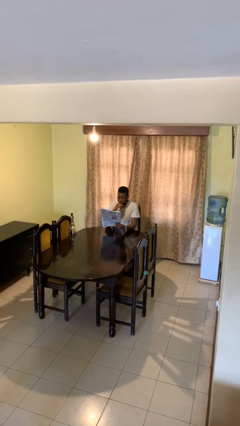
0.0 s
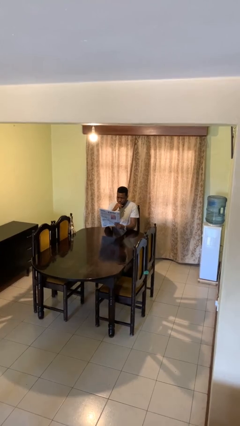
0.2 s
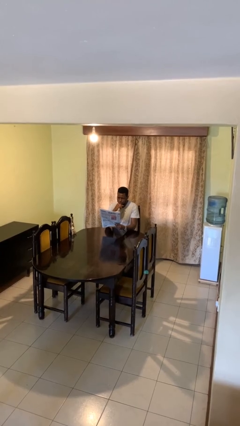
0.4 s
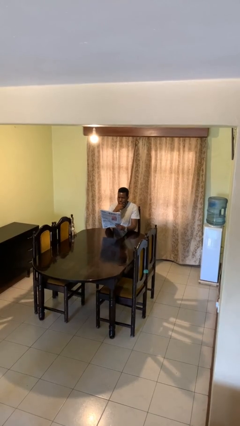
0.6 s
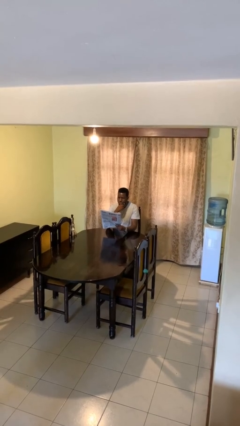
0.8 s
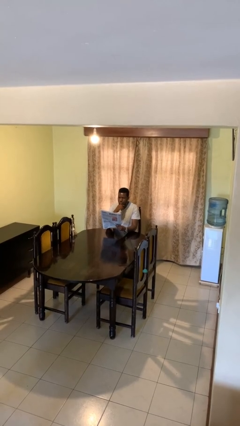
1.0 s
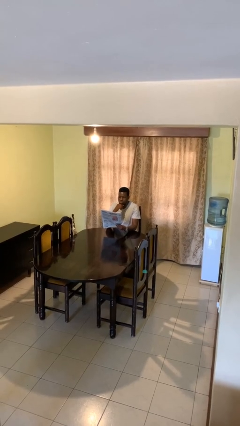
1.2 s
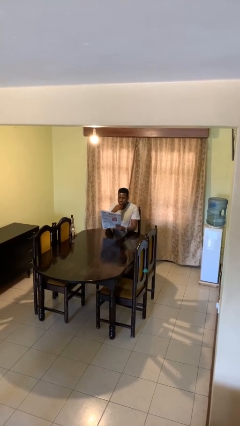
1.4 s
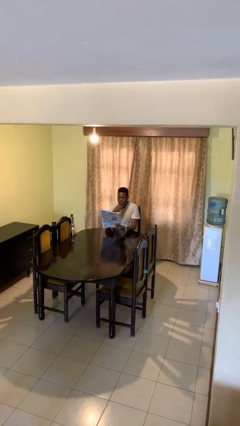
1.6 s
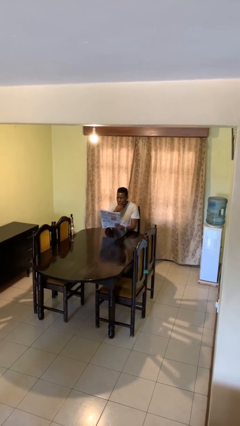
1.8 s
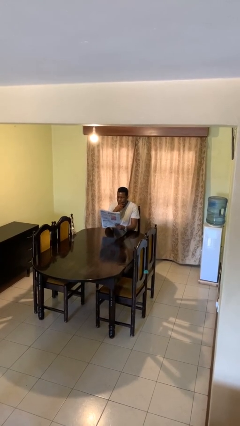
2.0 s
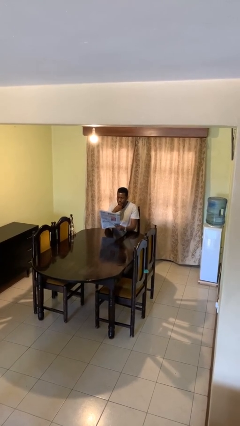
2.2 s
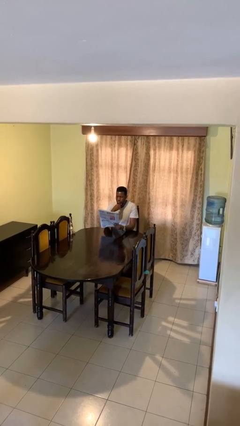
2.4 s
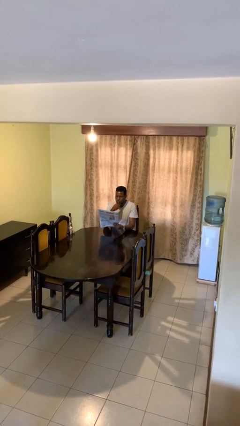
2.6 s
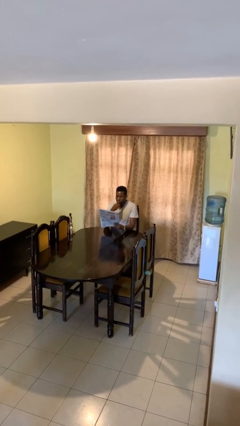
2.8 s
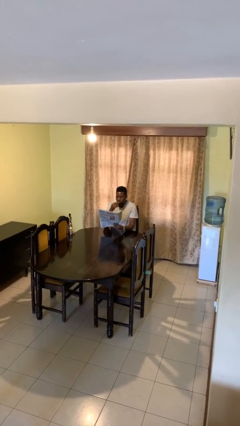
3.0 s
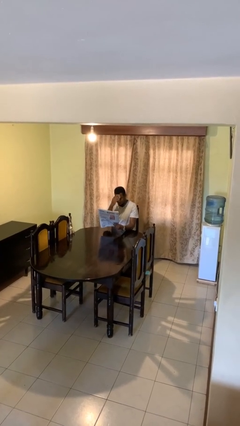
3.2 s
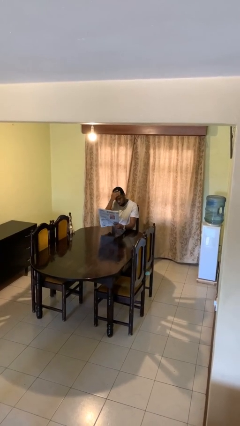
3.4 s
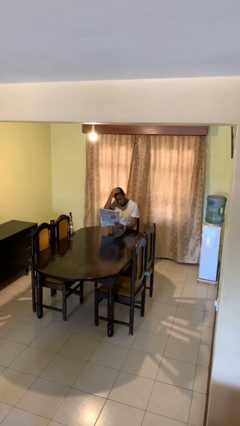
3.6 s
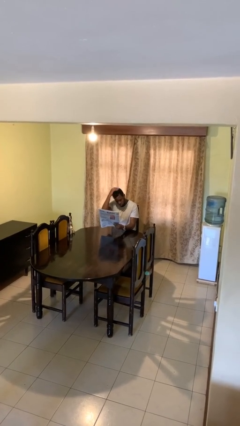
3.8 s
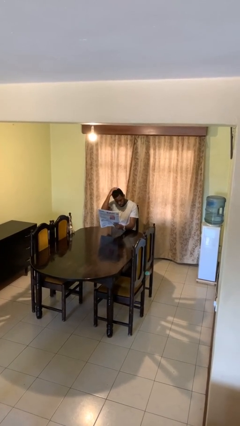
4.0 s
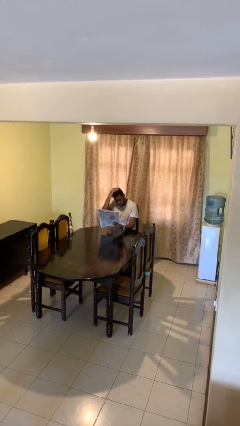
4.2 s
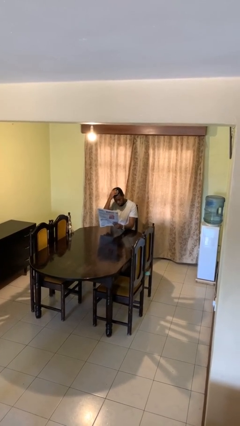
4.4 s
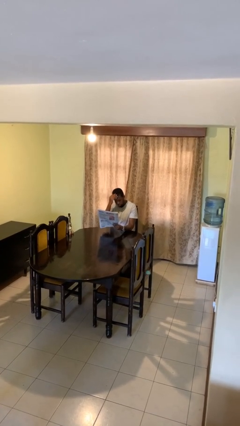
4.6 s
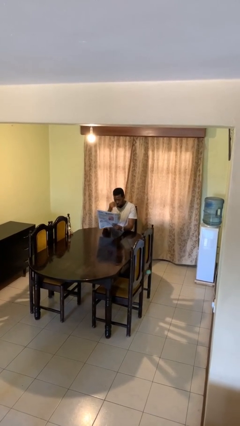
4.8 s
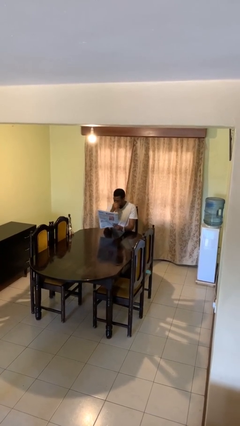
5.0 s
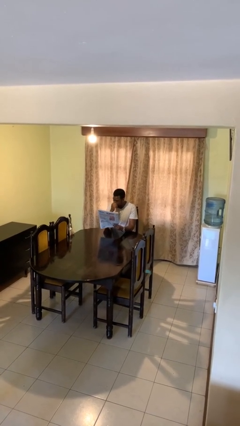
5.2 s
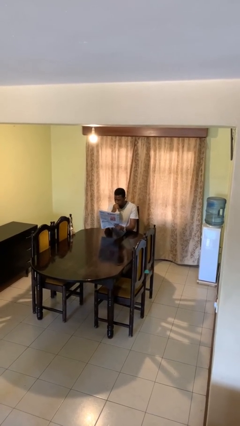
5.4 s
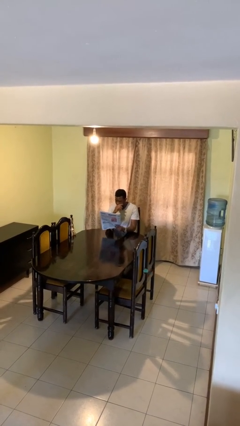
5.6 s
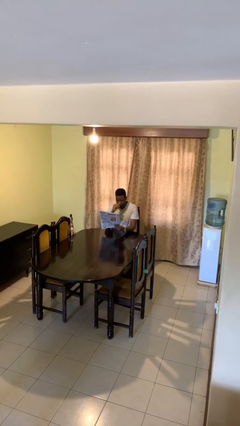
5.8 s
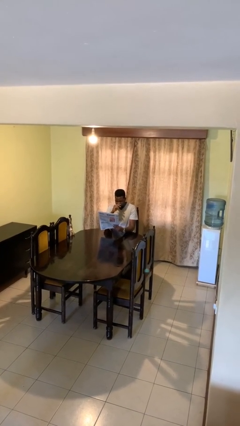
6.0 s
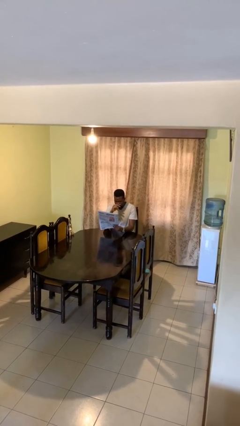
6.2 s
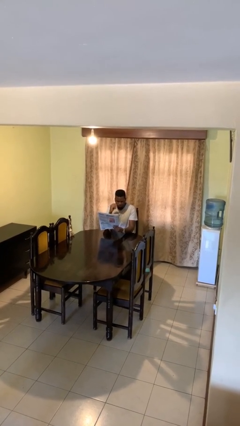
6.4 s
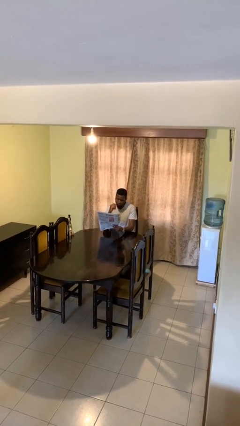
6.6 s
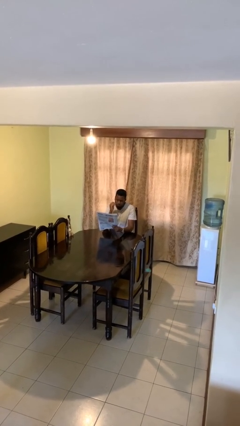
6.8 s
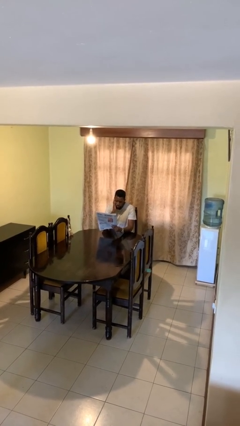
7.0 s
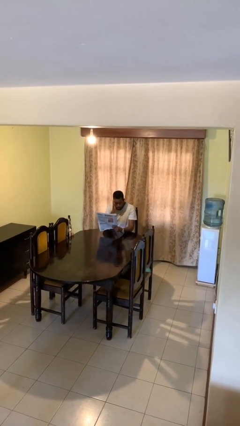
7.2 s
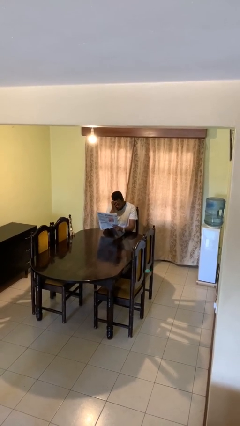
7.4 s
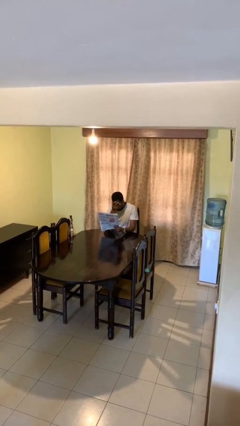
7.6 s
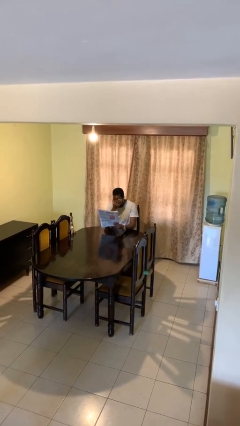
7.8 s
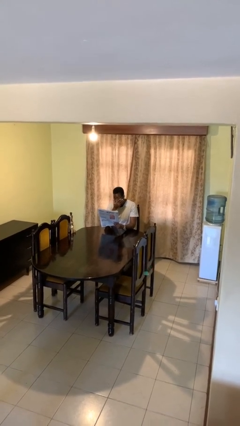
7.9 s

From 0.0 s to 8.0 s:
person reads document

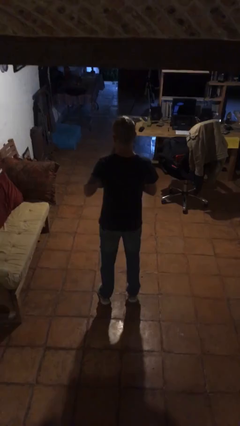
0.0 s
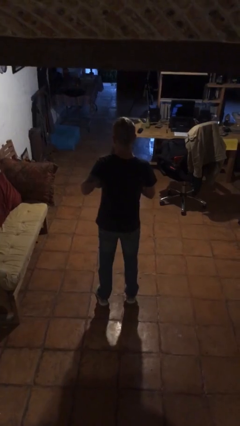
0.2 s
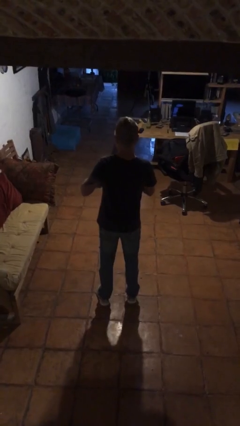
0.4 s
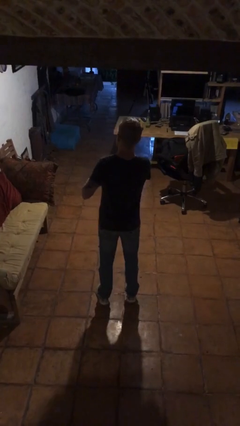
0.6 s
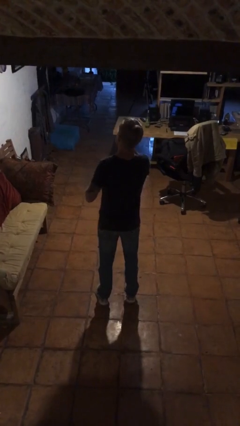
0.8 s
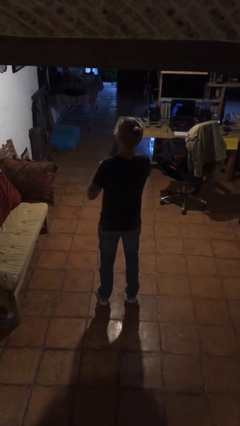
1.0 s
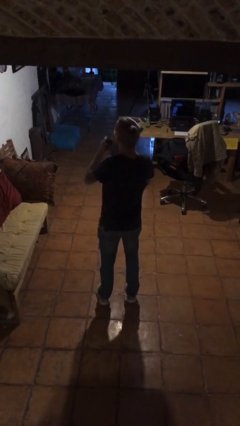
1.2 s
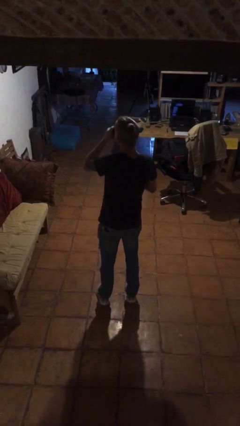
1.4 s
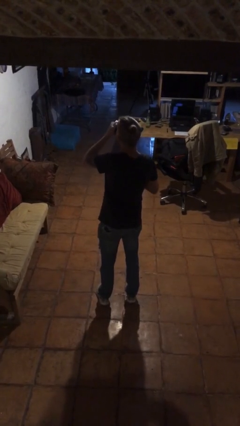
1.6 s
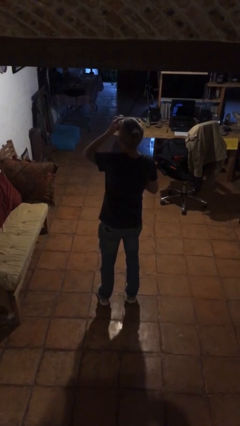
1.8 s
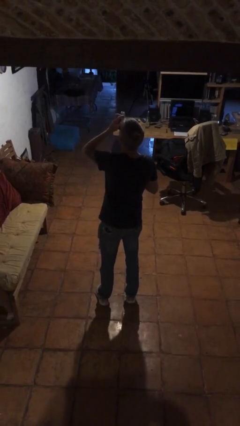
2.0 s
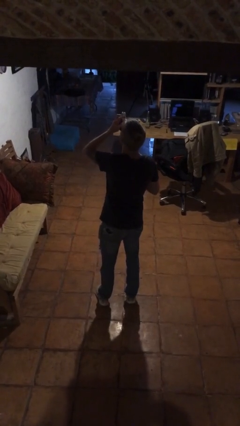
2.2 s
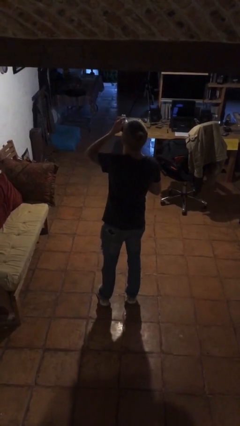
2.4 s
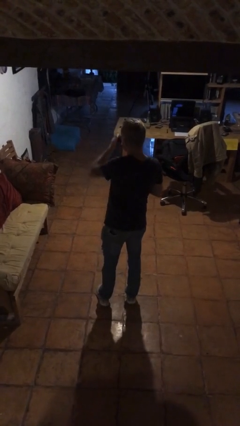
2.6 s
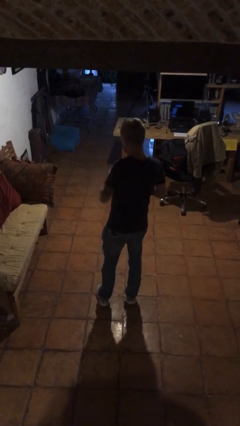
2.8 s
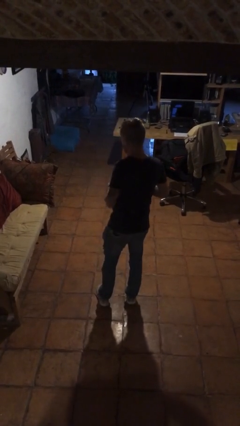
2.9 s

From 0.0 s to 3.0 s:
person drinks from cup

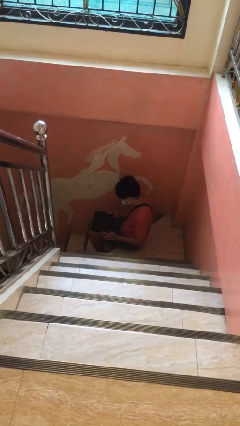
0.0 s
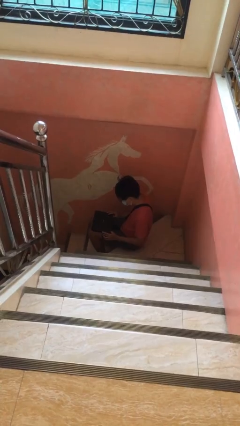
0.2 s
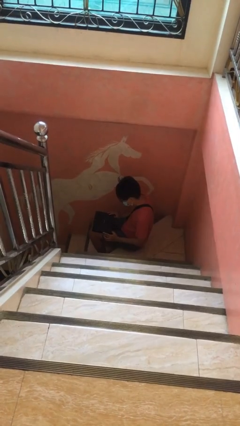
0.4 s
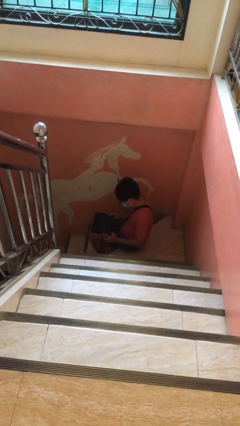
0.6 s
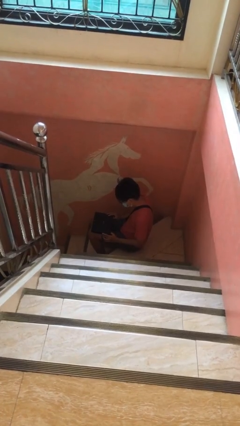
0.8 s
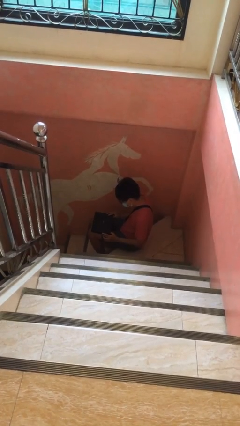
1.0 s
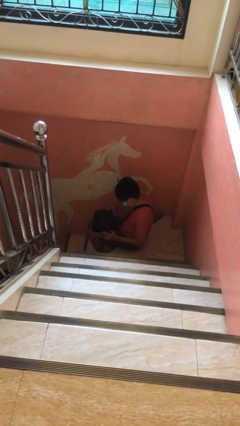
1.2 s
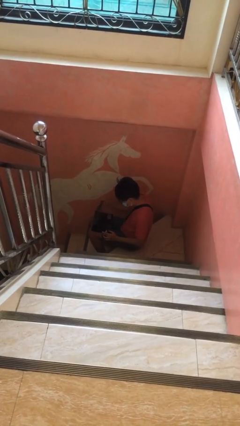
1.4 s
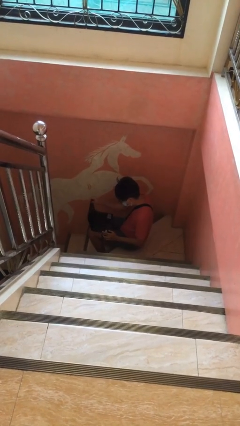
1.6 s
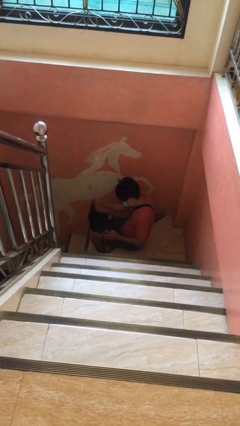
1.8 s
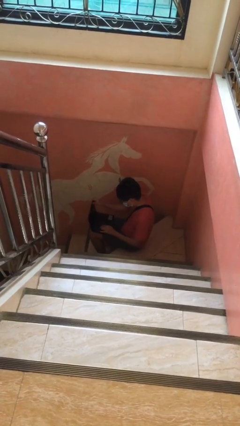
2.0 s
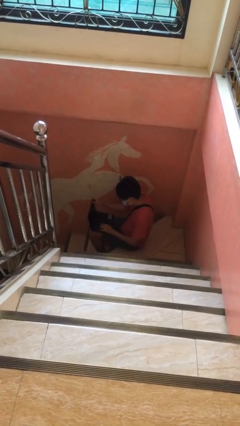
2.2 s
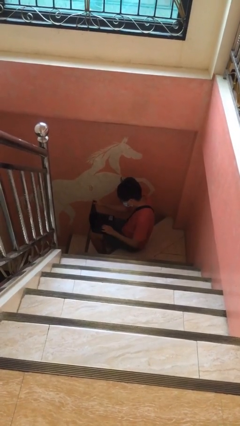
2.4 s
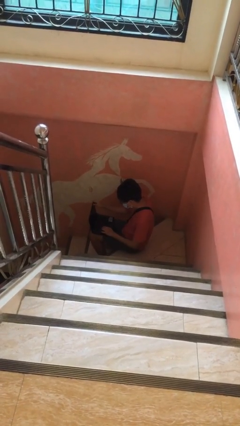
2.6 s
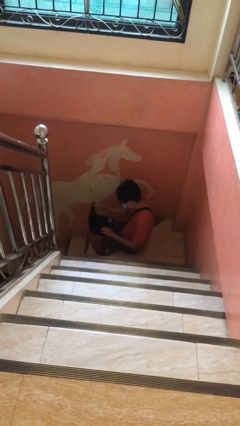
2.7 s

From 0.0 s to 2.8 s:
person interacts with laptop

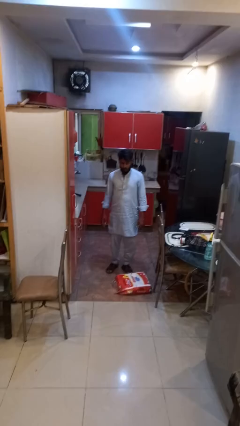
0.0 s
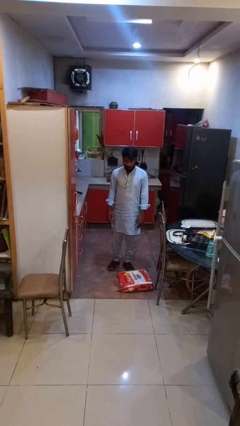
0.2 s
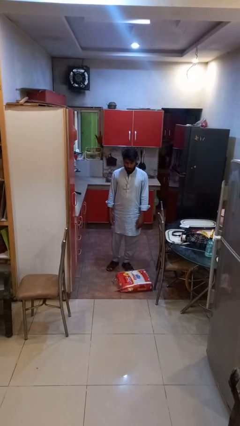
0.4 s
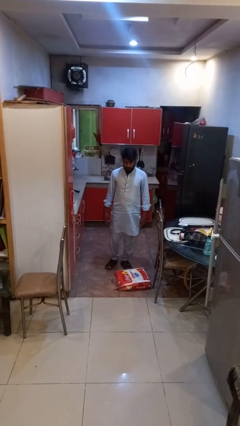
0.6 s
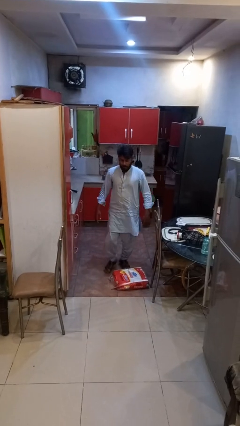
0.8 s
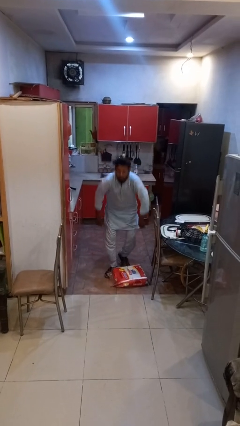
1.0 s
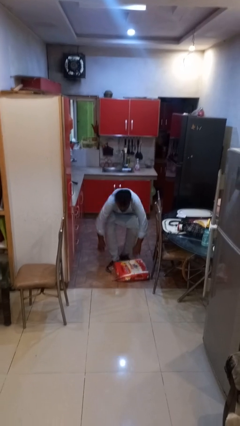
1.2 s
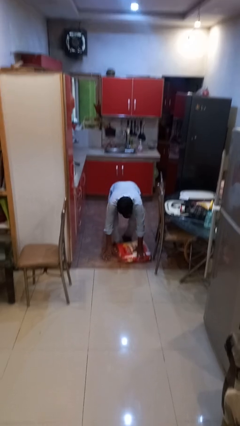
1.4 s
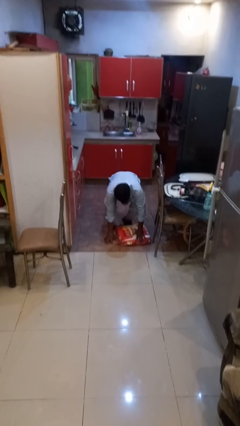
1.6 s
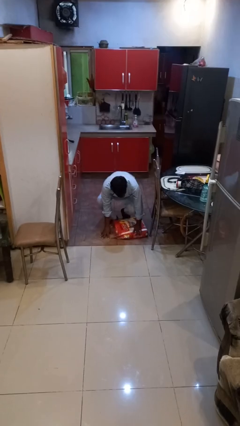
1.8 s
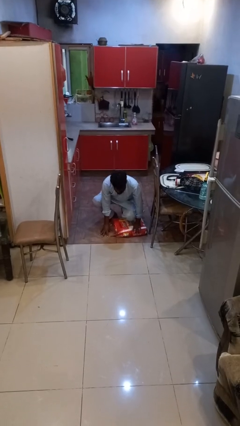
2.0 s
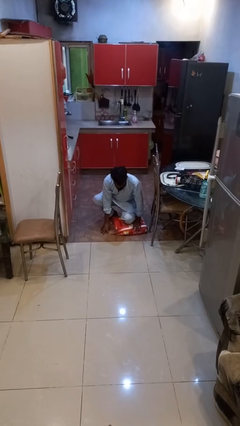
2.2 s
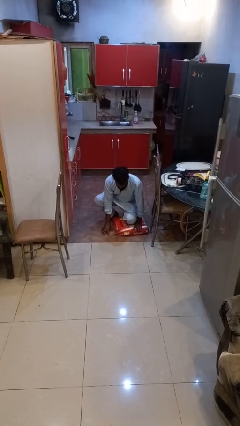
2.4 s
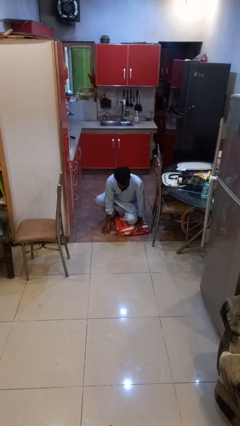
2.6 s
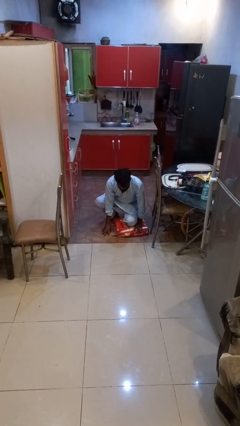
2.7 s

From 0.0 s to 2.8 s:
person trips on object on floor

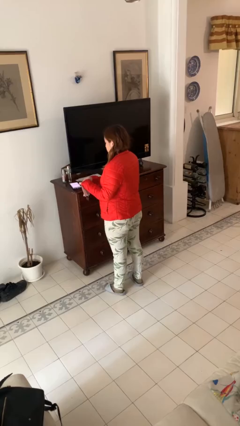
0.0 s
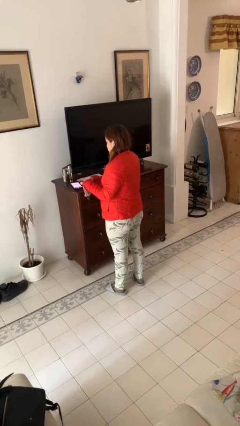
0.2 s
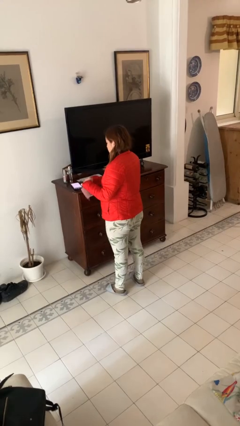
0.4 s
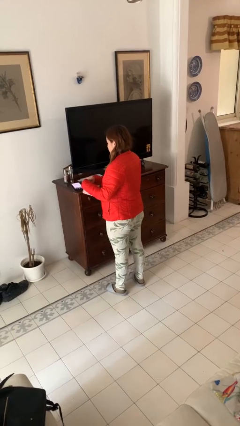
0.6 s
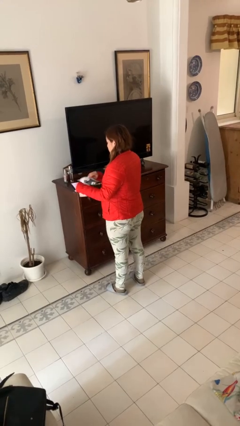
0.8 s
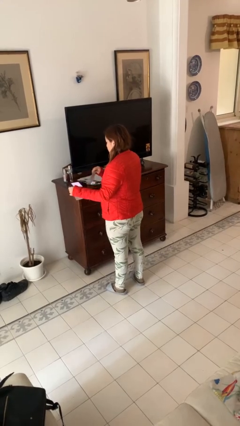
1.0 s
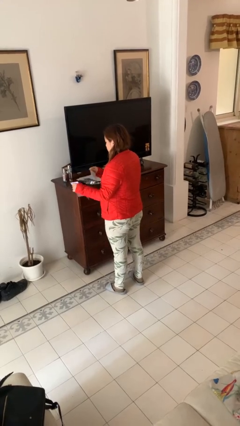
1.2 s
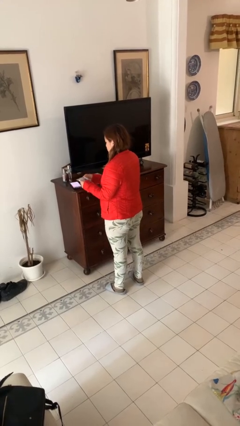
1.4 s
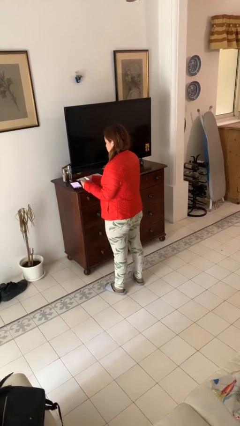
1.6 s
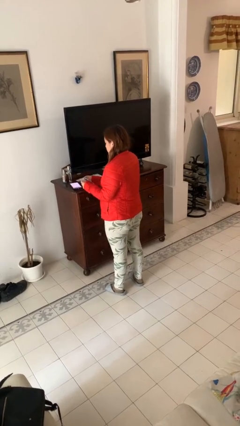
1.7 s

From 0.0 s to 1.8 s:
person tears paper
